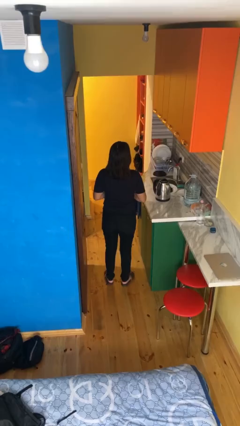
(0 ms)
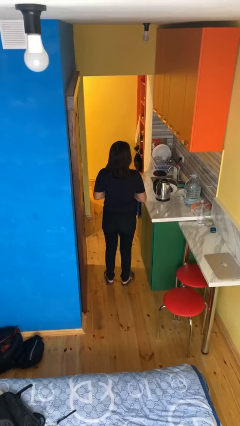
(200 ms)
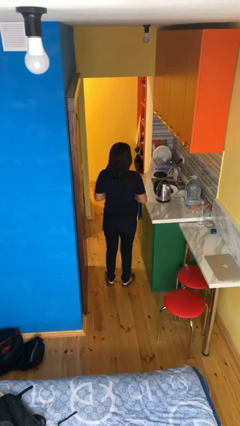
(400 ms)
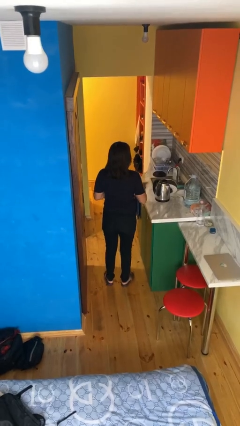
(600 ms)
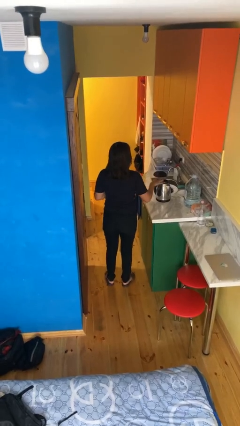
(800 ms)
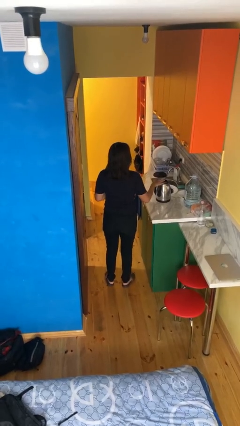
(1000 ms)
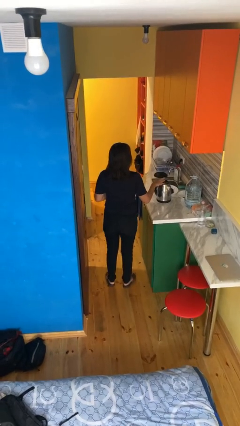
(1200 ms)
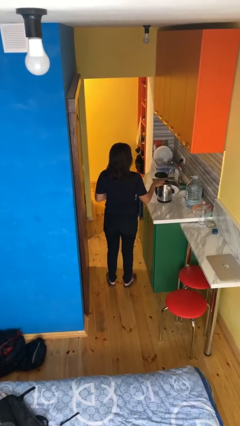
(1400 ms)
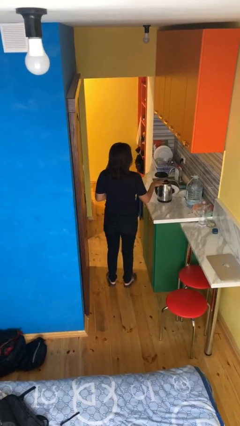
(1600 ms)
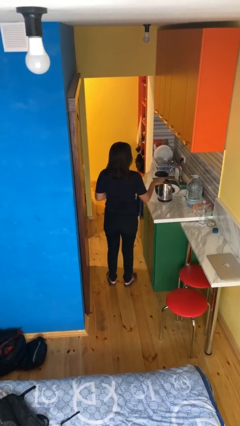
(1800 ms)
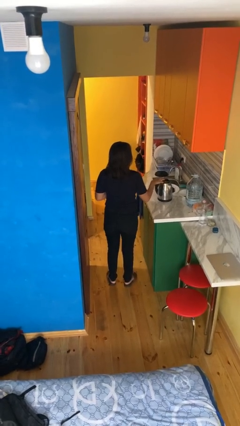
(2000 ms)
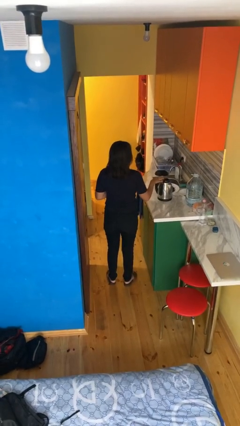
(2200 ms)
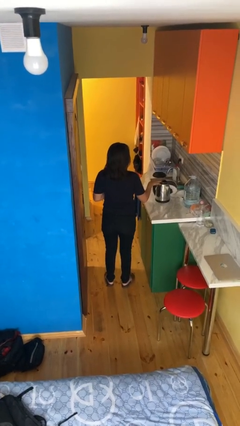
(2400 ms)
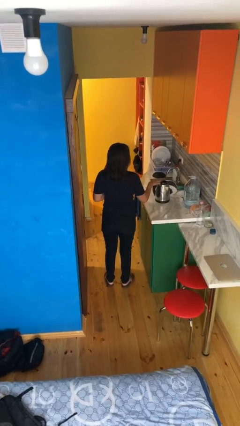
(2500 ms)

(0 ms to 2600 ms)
person taps object with finger

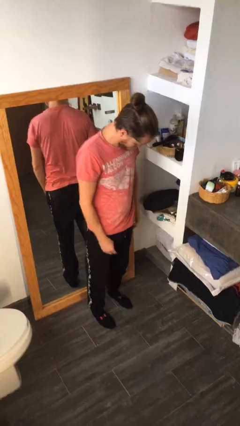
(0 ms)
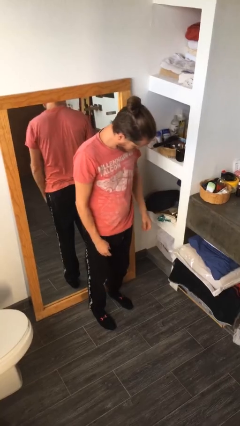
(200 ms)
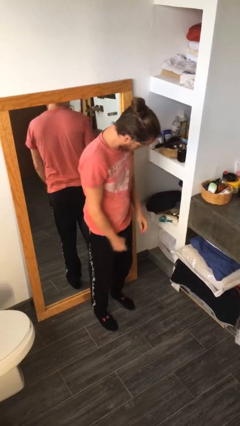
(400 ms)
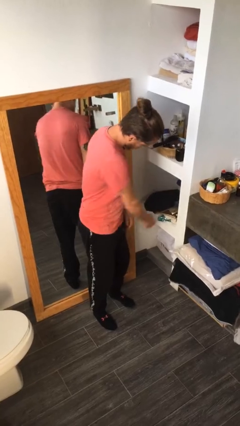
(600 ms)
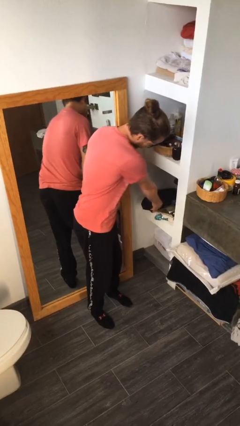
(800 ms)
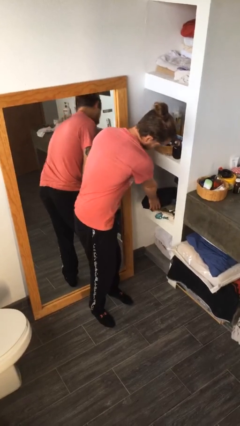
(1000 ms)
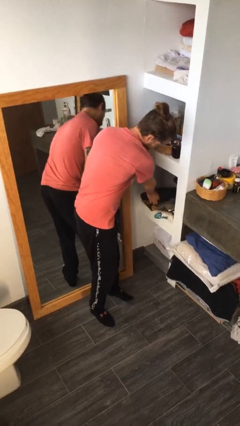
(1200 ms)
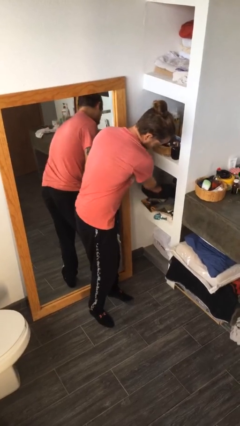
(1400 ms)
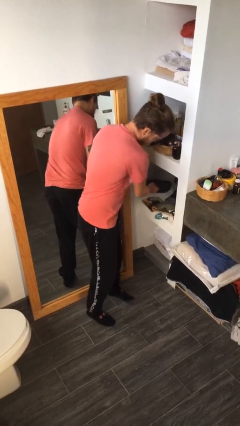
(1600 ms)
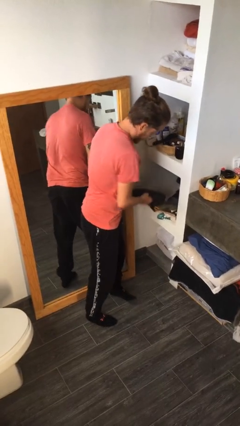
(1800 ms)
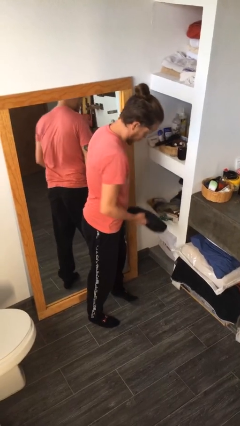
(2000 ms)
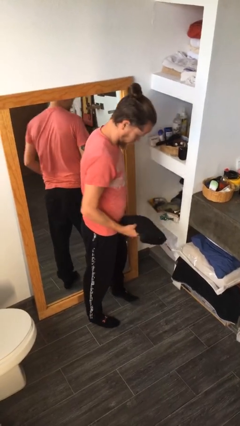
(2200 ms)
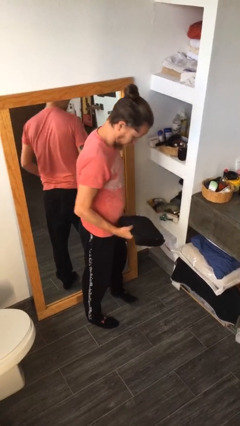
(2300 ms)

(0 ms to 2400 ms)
person picks up object from cabinet

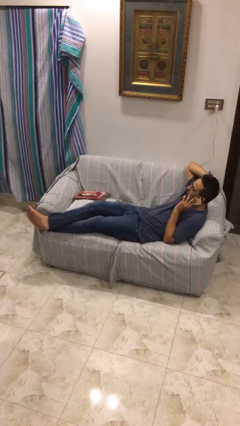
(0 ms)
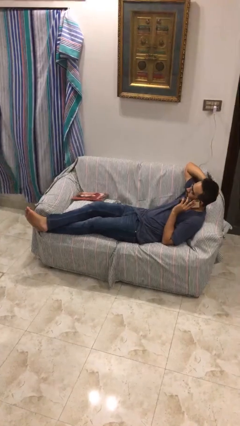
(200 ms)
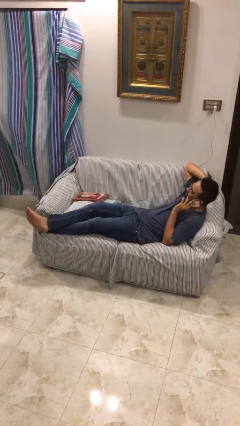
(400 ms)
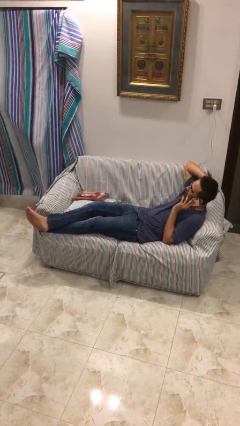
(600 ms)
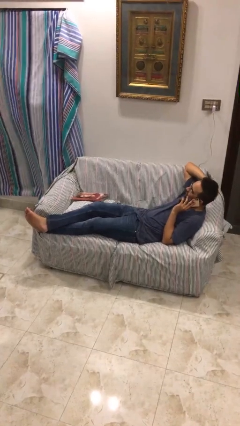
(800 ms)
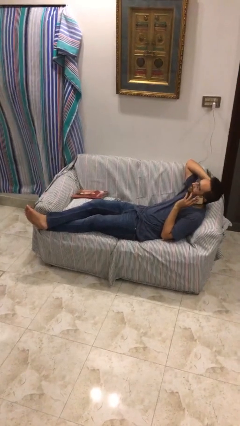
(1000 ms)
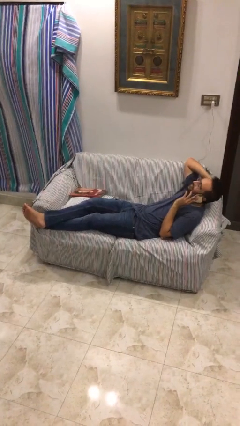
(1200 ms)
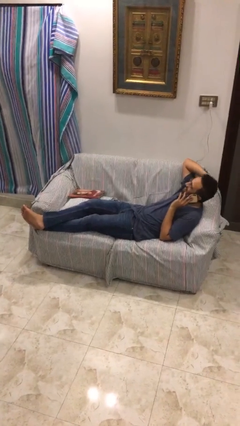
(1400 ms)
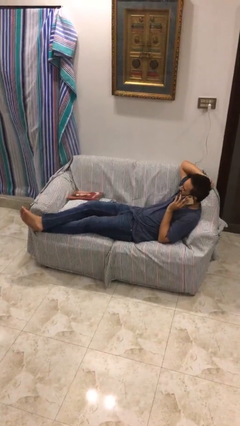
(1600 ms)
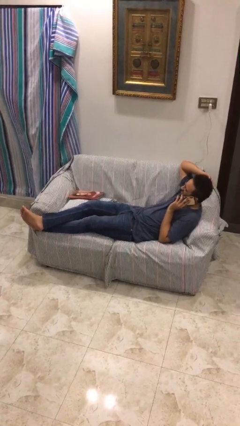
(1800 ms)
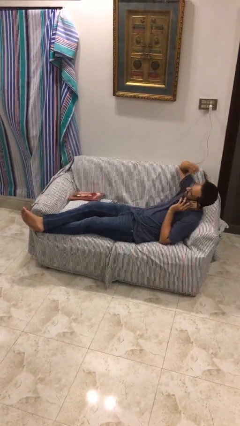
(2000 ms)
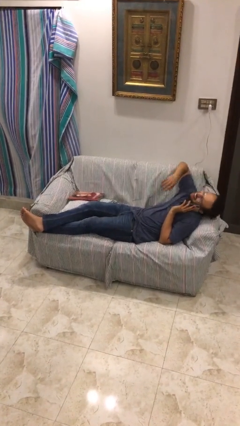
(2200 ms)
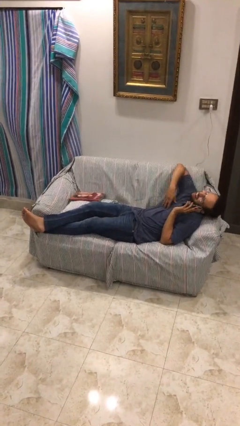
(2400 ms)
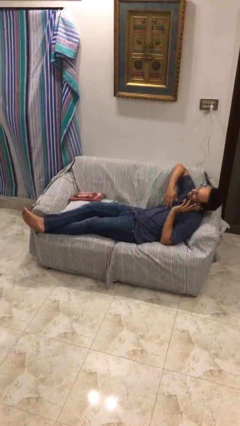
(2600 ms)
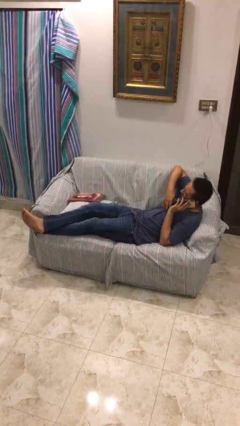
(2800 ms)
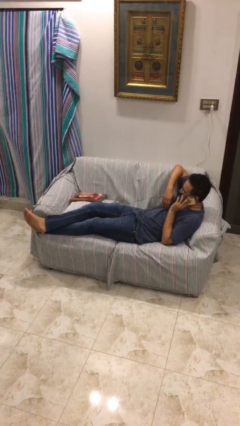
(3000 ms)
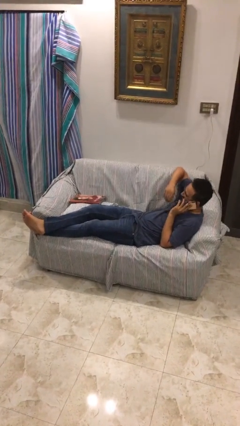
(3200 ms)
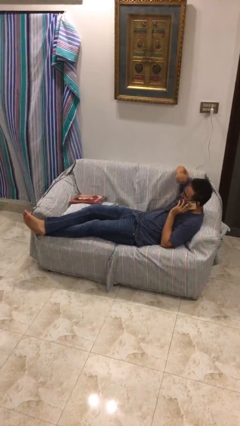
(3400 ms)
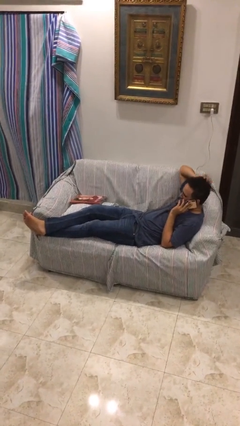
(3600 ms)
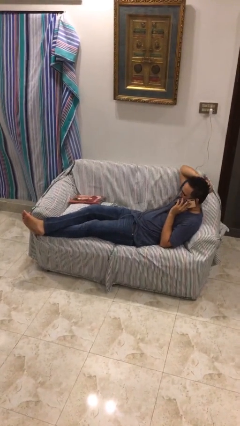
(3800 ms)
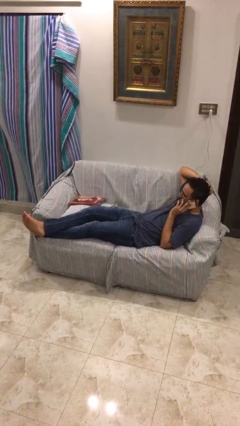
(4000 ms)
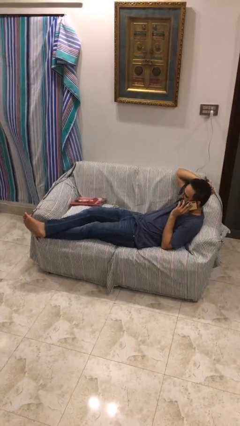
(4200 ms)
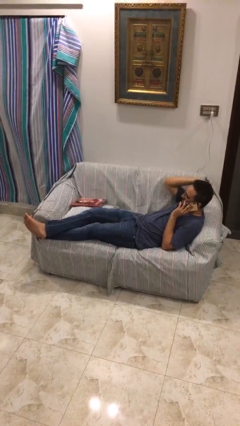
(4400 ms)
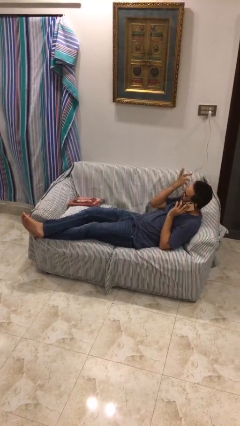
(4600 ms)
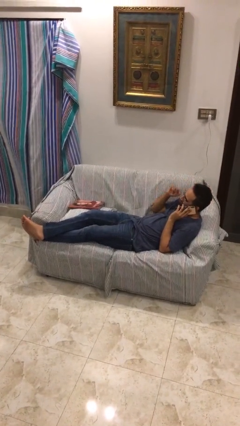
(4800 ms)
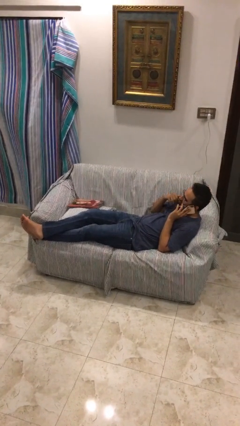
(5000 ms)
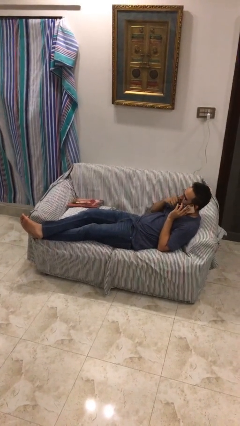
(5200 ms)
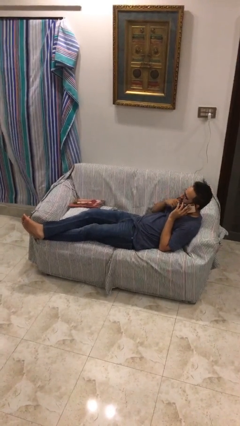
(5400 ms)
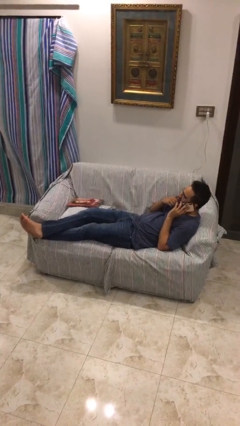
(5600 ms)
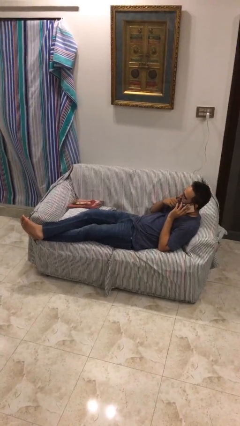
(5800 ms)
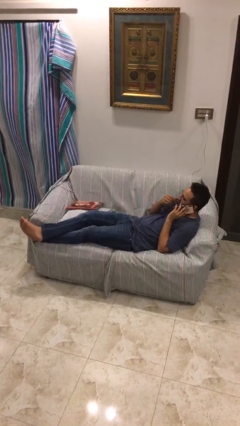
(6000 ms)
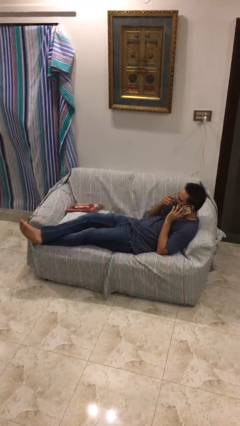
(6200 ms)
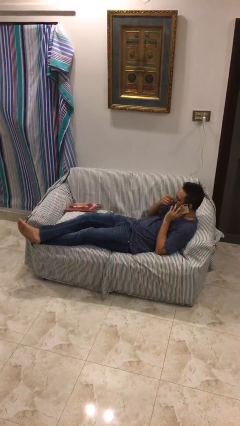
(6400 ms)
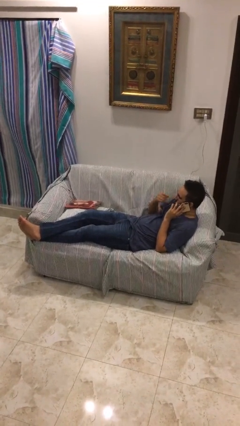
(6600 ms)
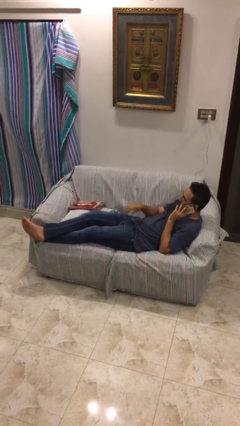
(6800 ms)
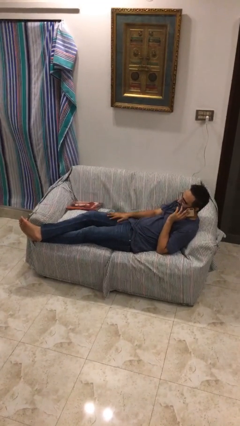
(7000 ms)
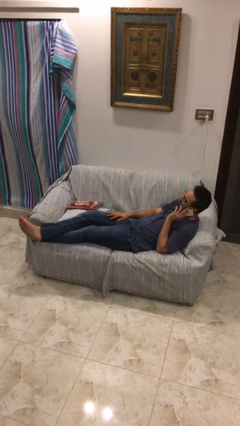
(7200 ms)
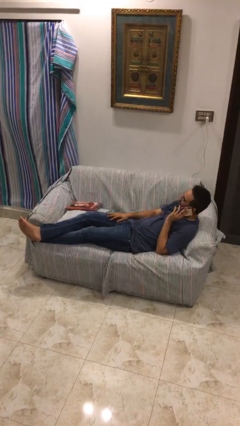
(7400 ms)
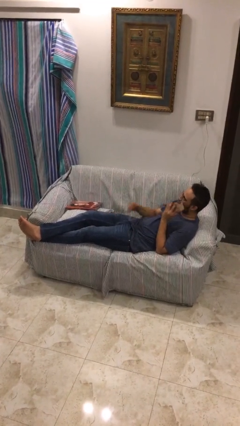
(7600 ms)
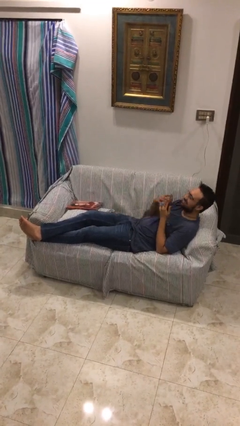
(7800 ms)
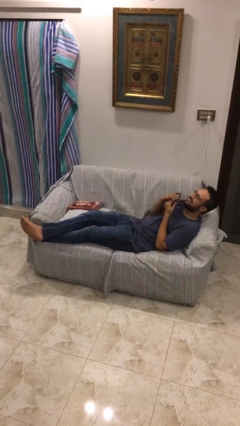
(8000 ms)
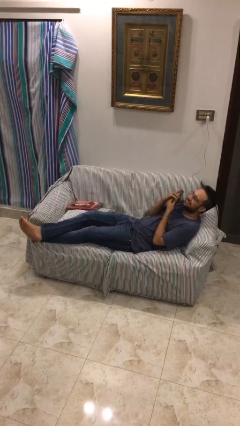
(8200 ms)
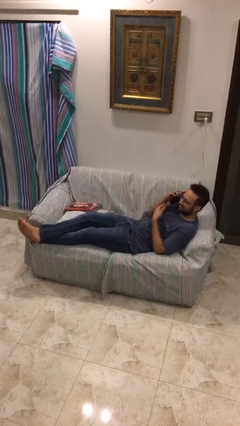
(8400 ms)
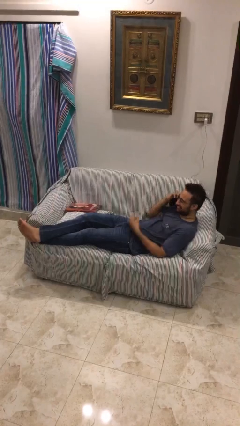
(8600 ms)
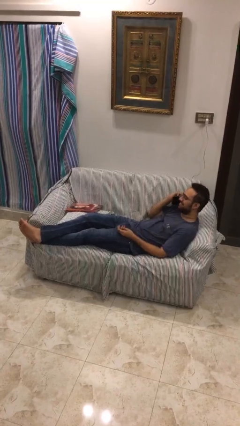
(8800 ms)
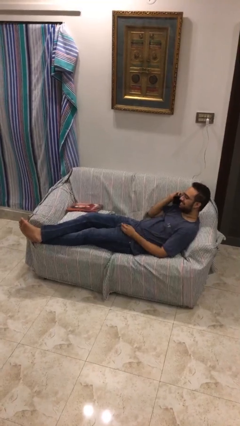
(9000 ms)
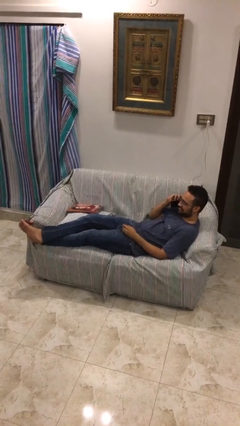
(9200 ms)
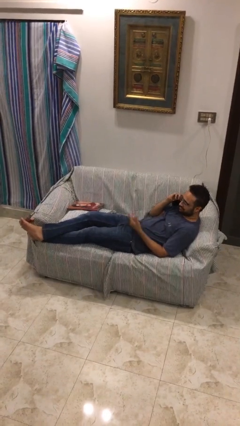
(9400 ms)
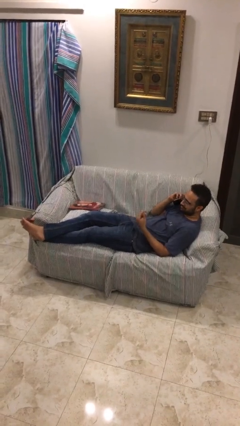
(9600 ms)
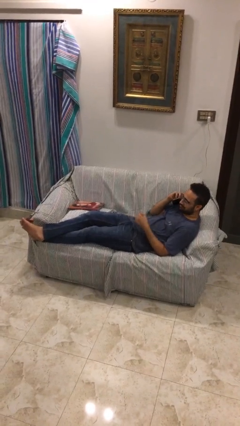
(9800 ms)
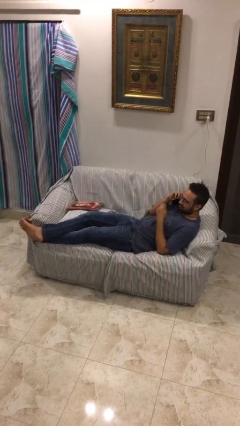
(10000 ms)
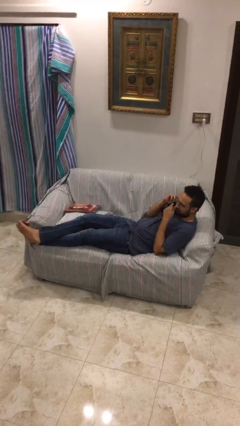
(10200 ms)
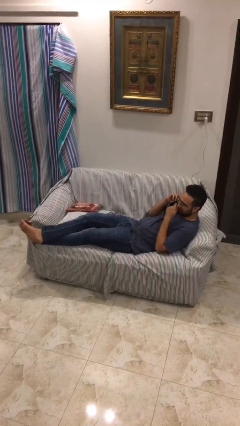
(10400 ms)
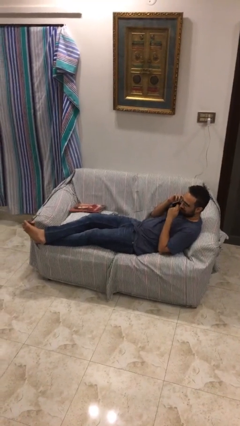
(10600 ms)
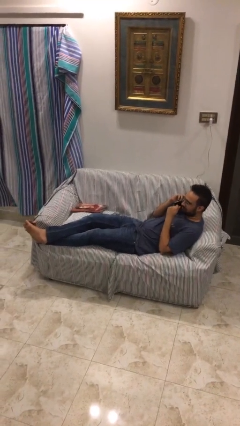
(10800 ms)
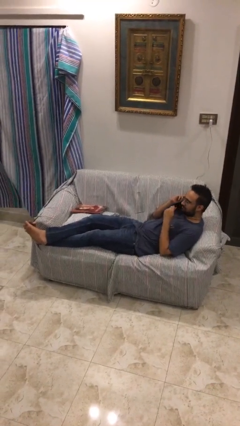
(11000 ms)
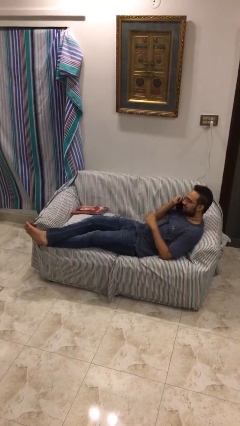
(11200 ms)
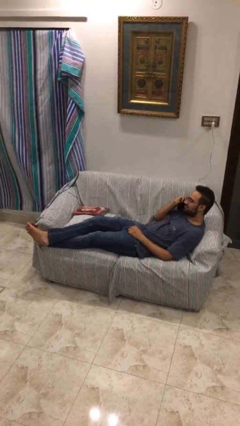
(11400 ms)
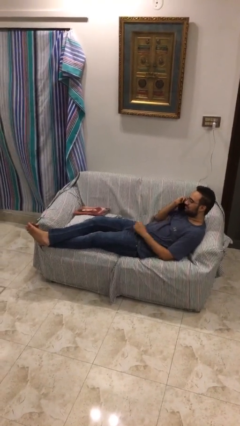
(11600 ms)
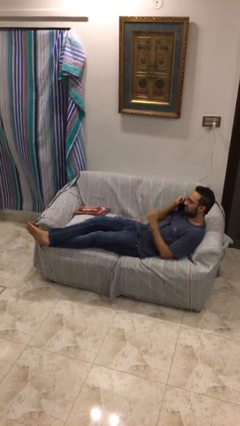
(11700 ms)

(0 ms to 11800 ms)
person talks on phone

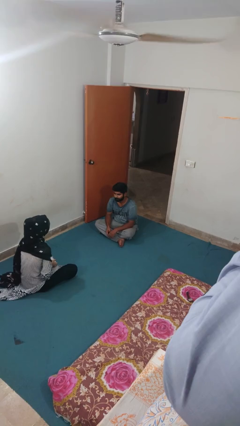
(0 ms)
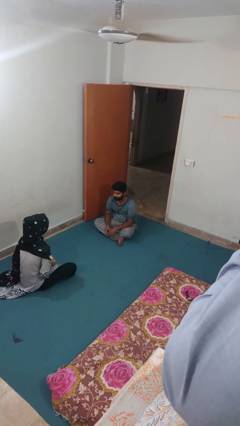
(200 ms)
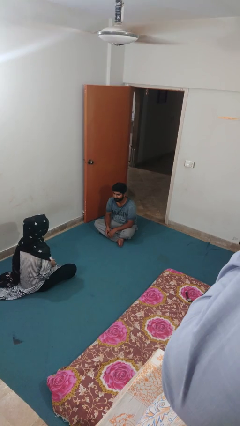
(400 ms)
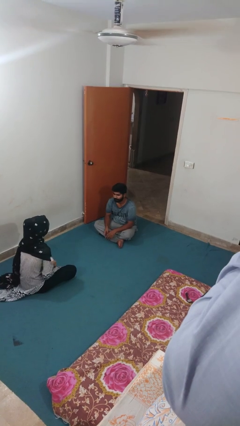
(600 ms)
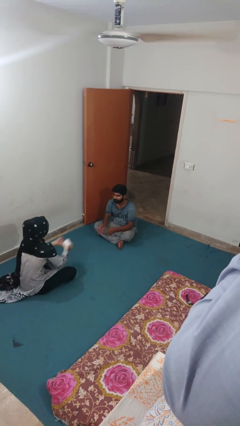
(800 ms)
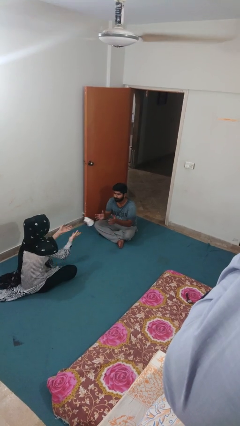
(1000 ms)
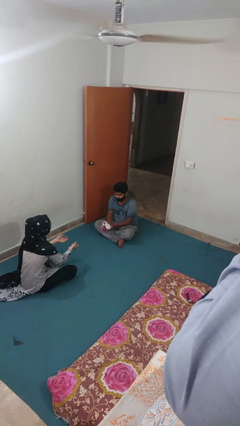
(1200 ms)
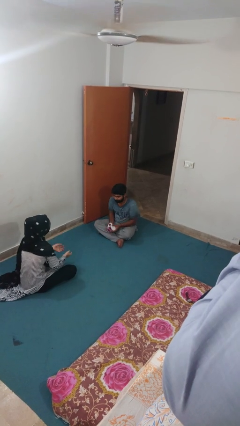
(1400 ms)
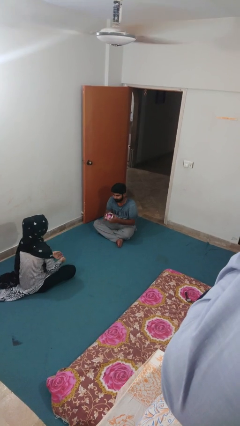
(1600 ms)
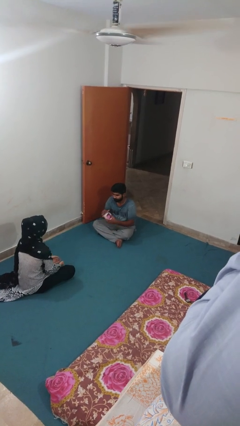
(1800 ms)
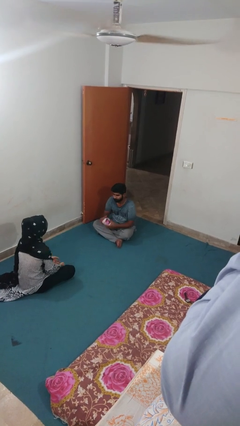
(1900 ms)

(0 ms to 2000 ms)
person catches object from person
